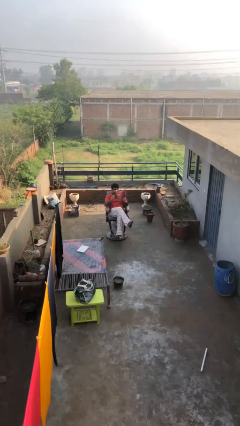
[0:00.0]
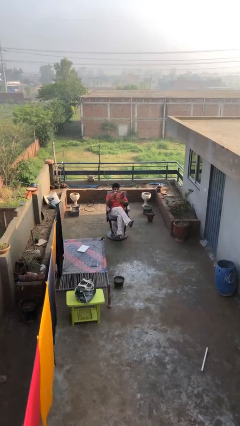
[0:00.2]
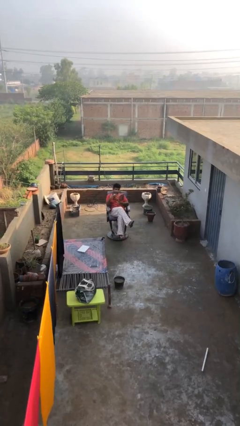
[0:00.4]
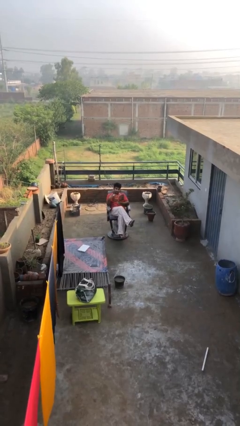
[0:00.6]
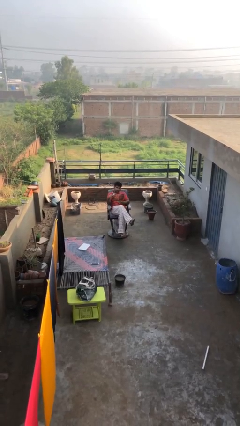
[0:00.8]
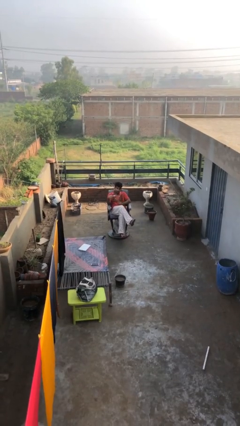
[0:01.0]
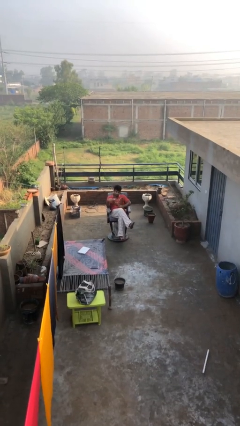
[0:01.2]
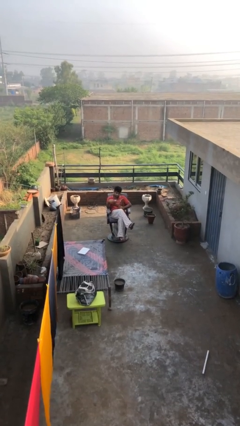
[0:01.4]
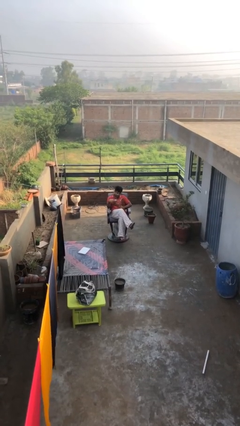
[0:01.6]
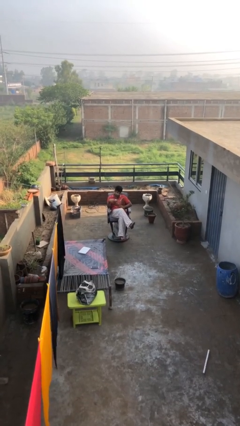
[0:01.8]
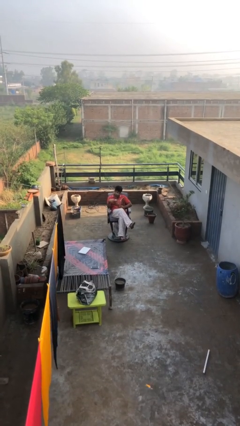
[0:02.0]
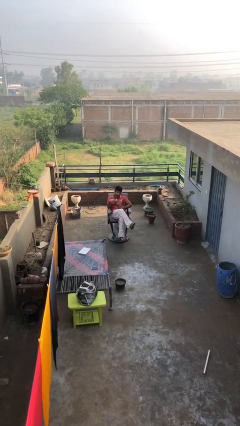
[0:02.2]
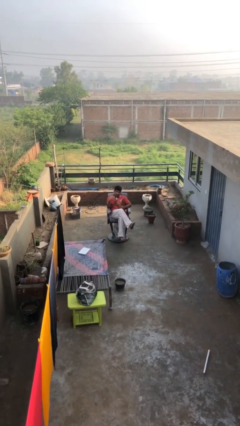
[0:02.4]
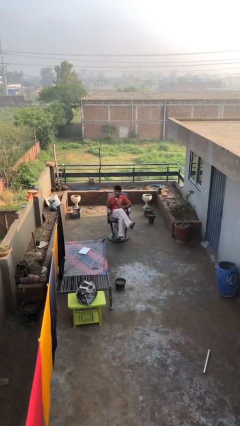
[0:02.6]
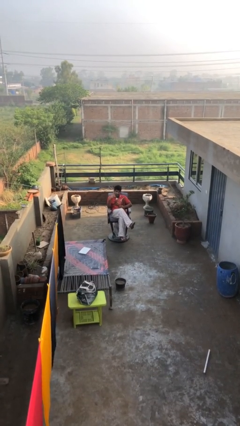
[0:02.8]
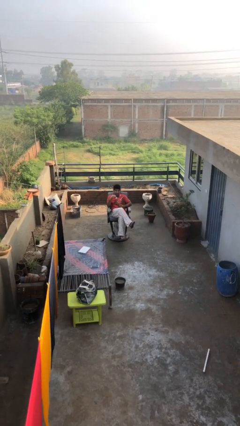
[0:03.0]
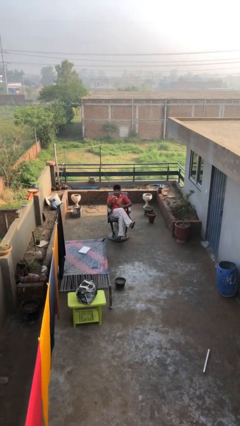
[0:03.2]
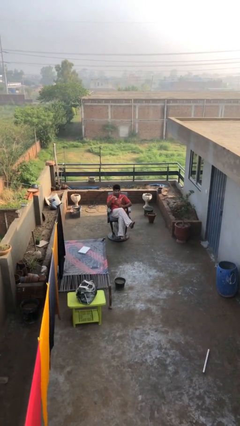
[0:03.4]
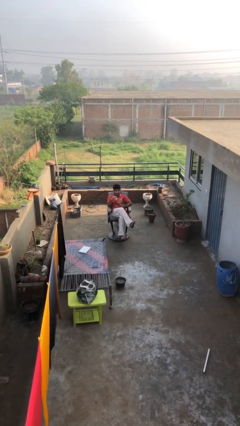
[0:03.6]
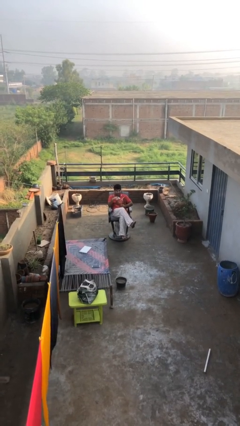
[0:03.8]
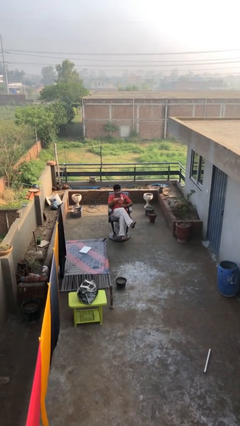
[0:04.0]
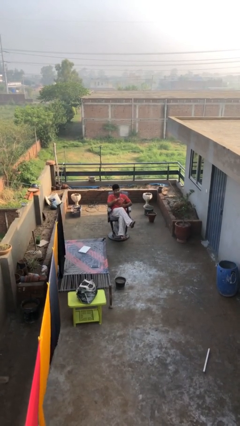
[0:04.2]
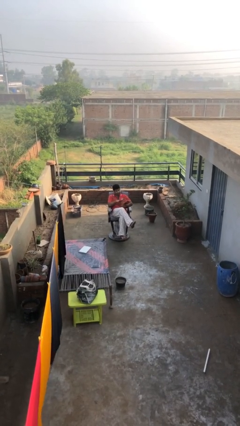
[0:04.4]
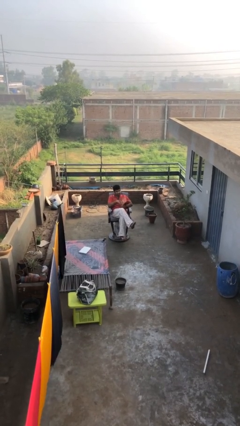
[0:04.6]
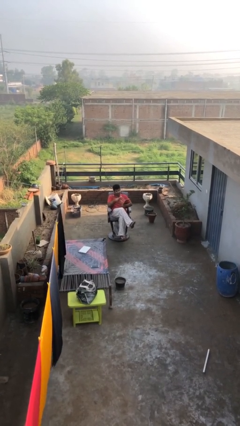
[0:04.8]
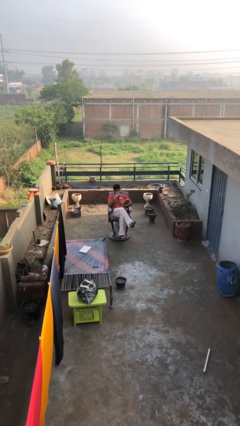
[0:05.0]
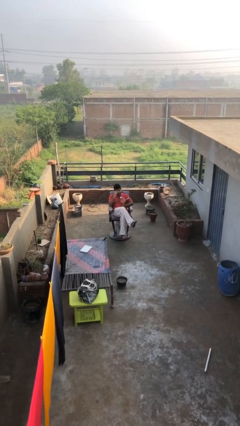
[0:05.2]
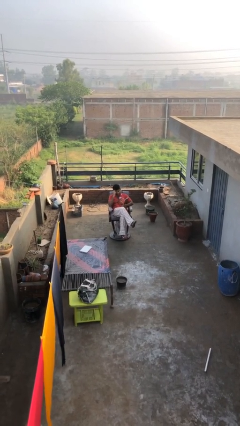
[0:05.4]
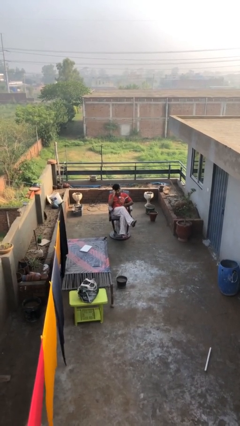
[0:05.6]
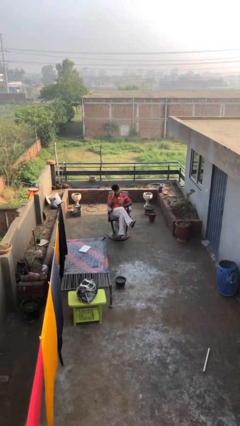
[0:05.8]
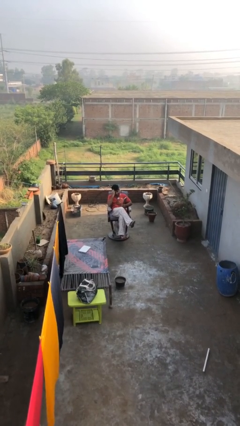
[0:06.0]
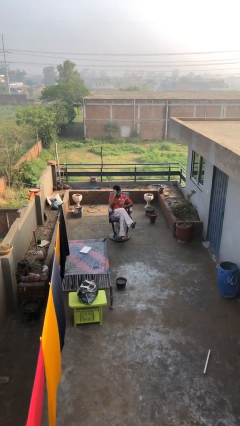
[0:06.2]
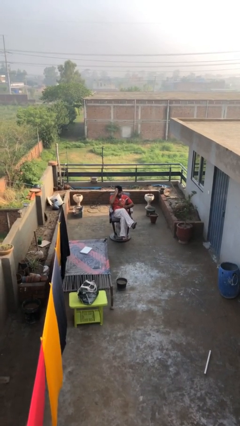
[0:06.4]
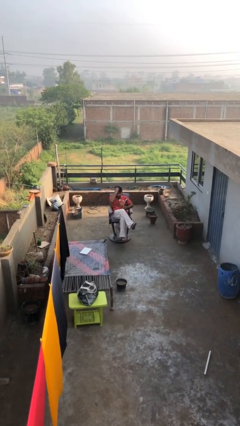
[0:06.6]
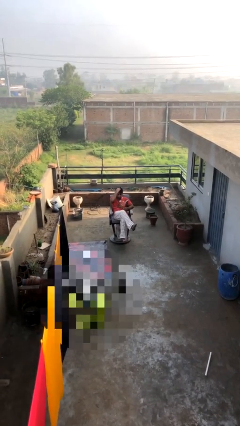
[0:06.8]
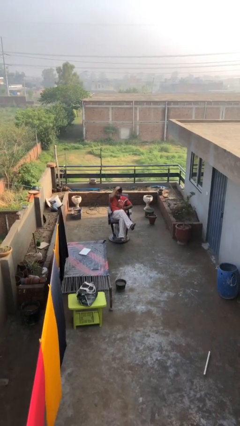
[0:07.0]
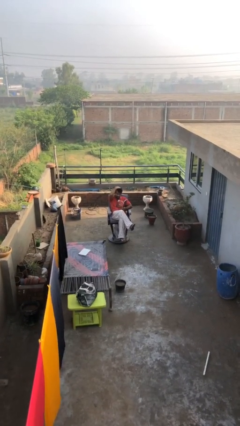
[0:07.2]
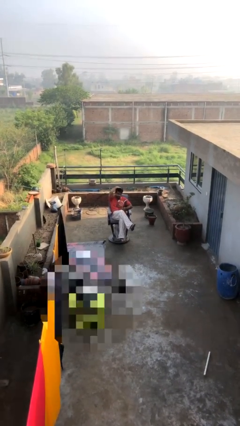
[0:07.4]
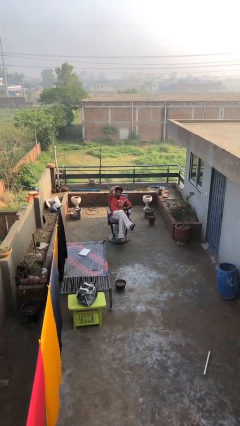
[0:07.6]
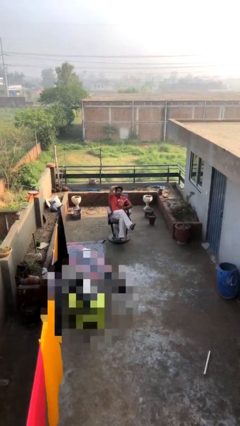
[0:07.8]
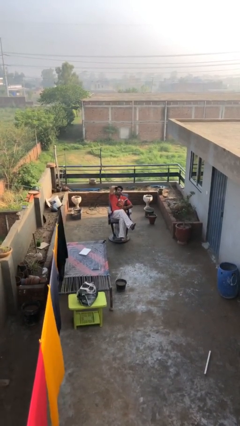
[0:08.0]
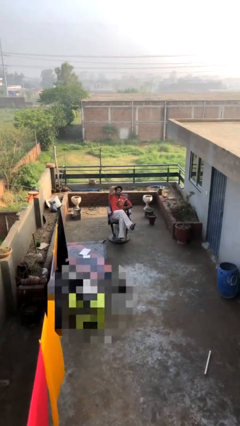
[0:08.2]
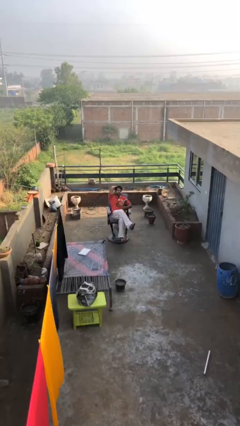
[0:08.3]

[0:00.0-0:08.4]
person reads document

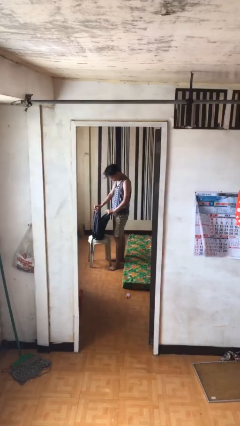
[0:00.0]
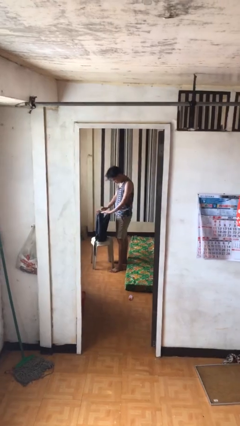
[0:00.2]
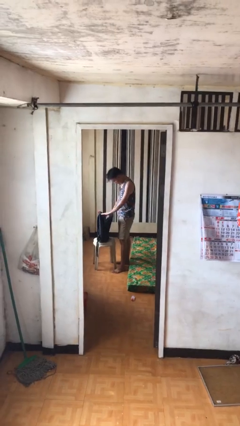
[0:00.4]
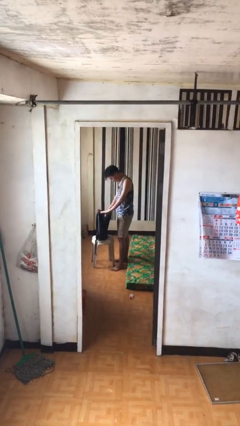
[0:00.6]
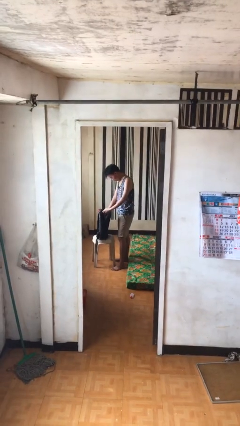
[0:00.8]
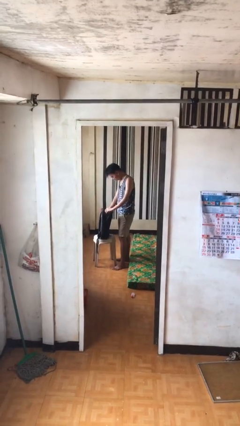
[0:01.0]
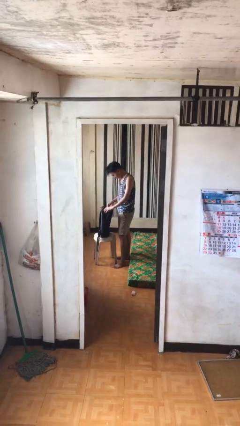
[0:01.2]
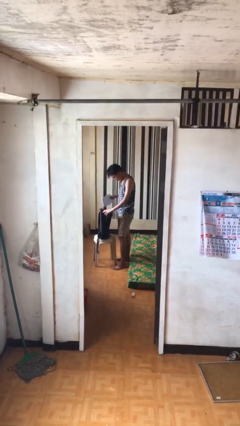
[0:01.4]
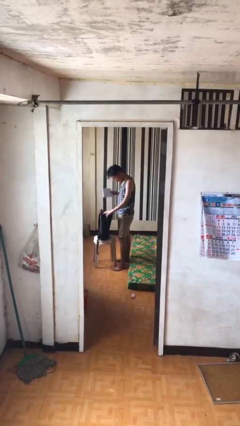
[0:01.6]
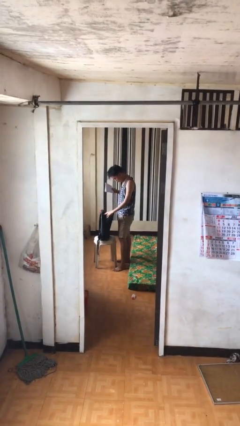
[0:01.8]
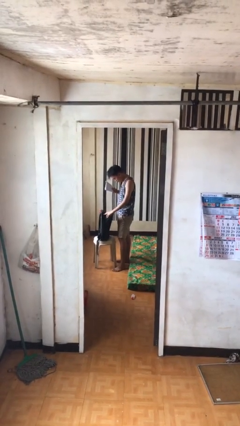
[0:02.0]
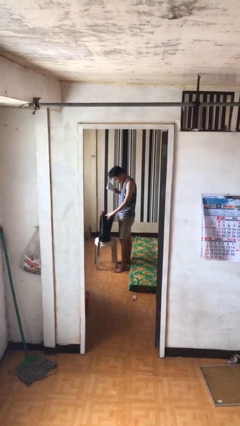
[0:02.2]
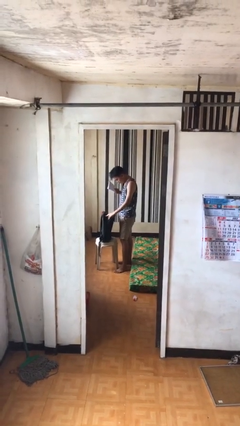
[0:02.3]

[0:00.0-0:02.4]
person takes object from backpack

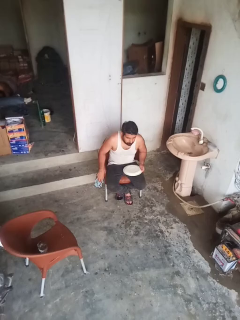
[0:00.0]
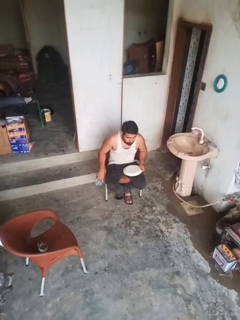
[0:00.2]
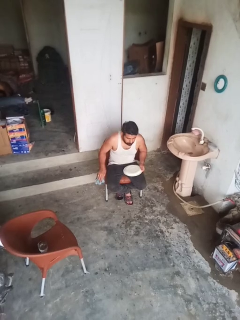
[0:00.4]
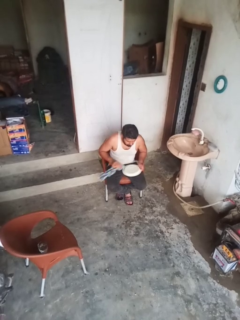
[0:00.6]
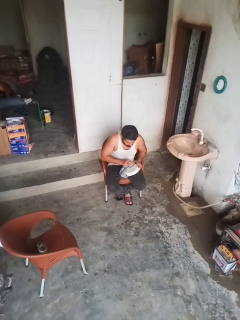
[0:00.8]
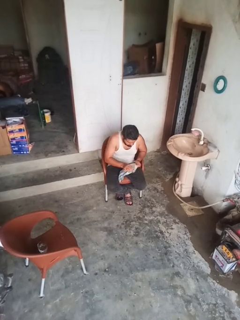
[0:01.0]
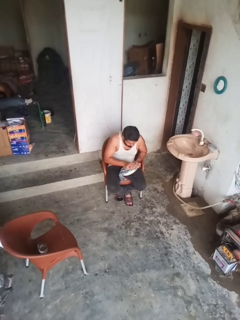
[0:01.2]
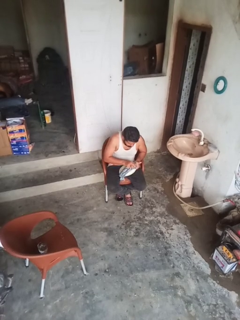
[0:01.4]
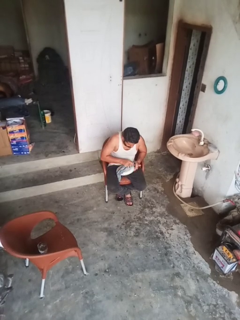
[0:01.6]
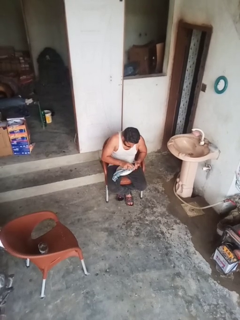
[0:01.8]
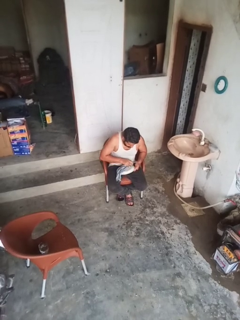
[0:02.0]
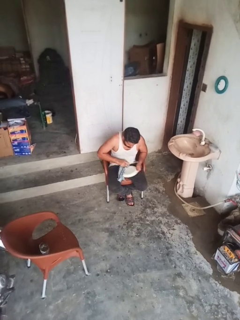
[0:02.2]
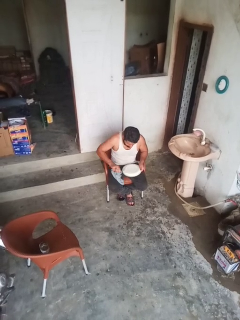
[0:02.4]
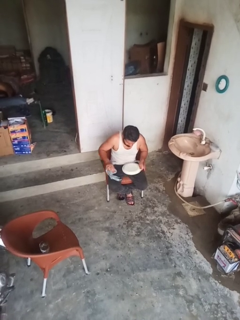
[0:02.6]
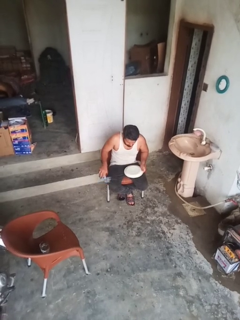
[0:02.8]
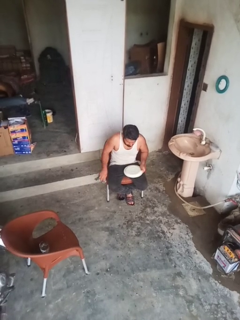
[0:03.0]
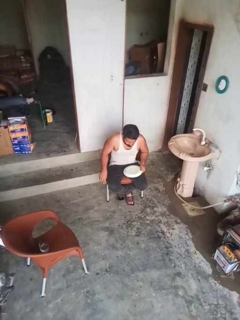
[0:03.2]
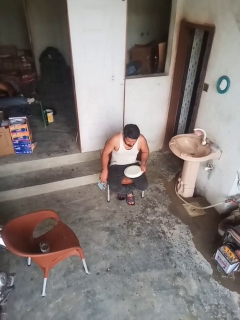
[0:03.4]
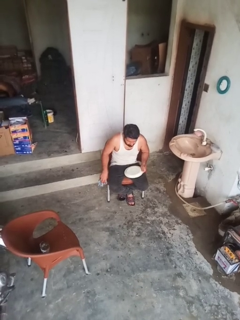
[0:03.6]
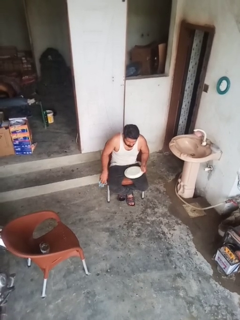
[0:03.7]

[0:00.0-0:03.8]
person dries dish

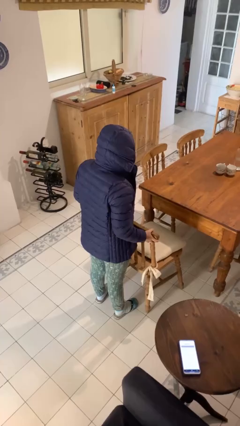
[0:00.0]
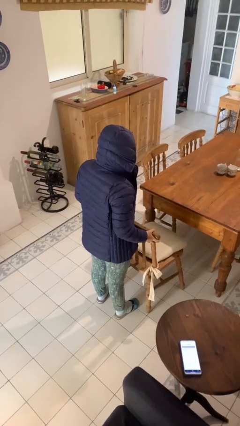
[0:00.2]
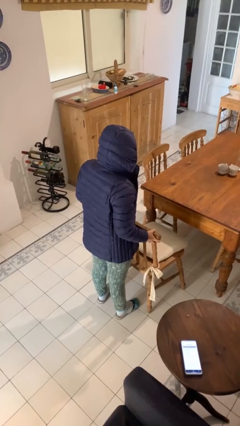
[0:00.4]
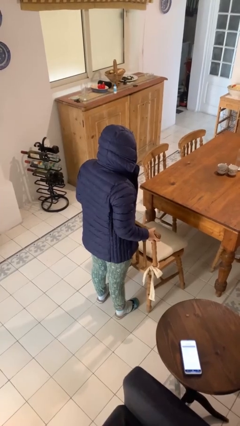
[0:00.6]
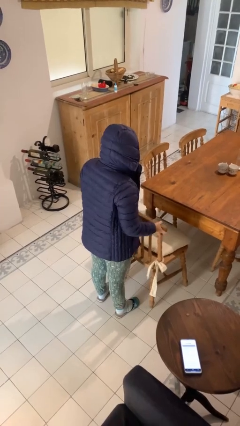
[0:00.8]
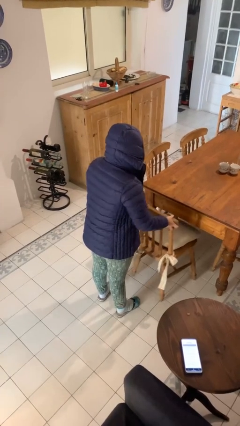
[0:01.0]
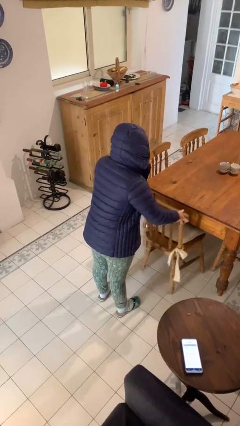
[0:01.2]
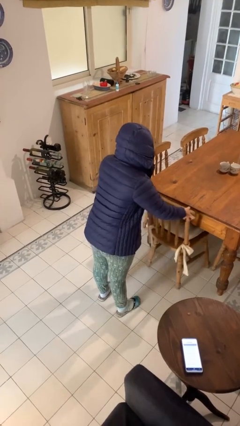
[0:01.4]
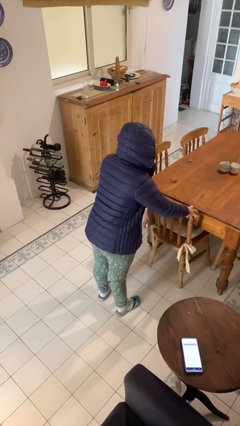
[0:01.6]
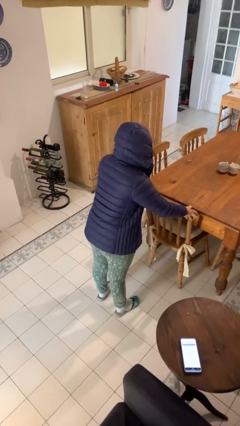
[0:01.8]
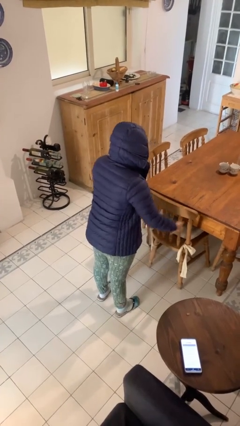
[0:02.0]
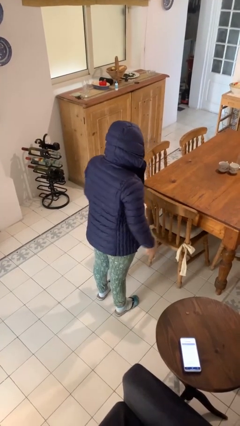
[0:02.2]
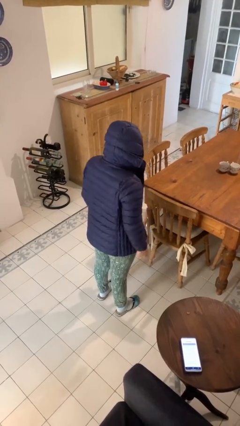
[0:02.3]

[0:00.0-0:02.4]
person pushes in chair

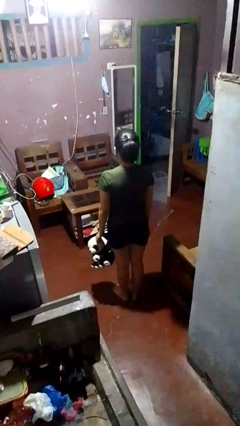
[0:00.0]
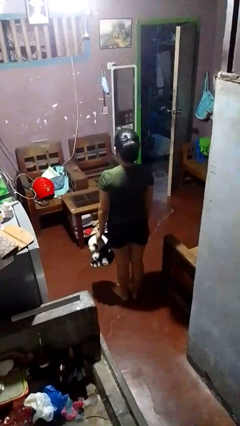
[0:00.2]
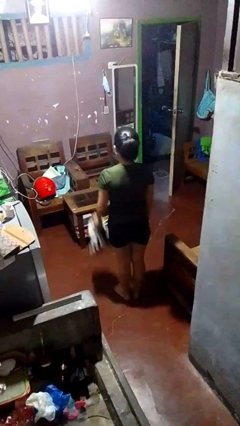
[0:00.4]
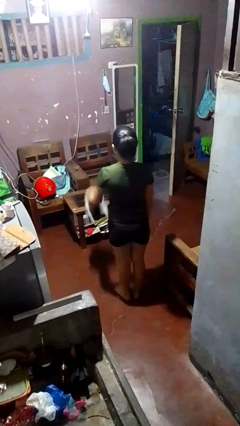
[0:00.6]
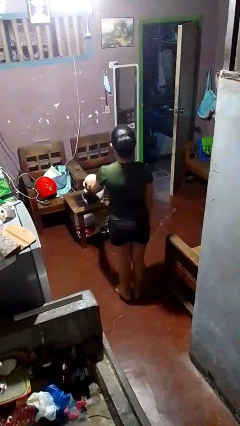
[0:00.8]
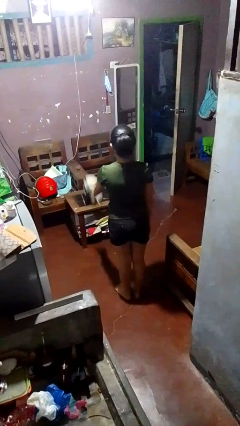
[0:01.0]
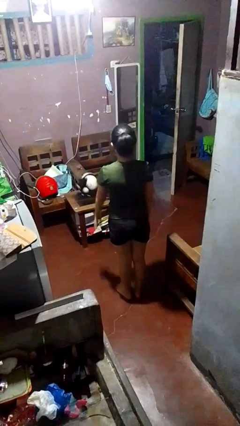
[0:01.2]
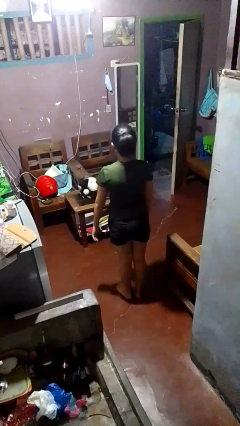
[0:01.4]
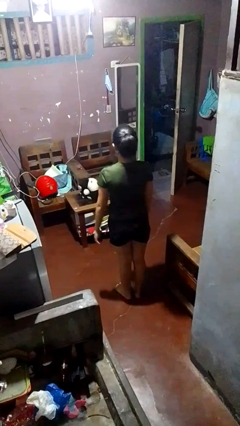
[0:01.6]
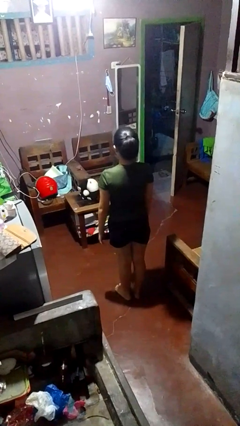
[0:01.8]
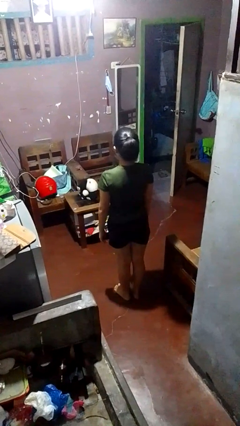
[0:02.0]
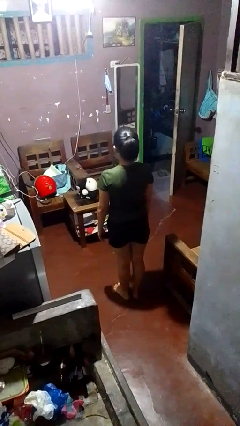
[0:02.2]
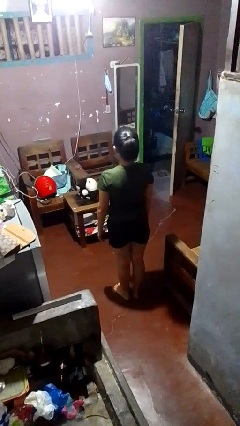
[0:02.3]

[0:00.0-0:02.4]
person throws object on table
